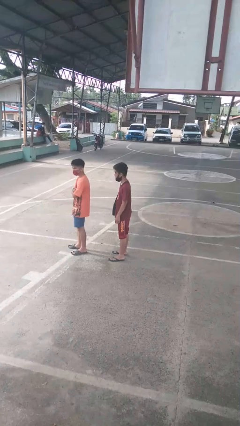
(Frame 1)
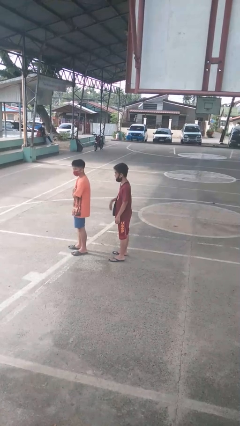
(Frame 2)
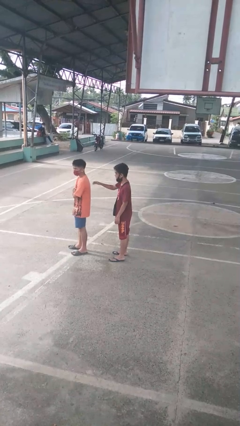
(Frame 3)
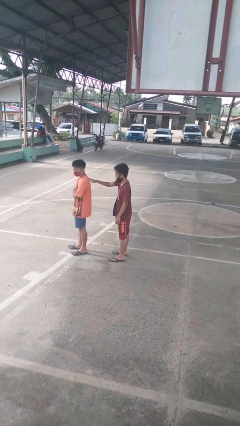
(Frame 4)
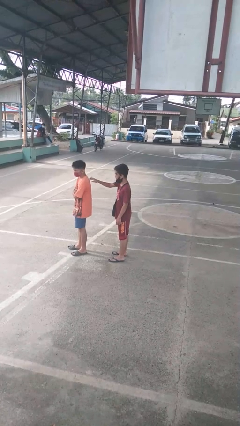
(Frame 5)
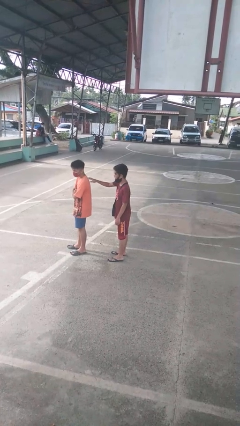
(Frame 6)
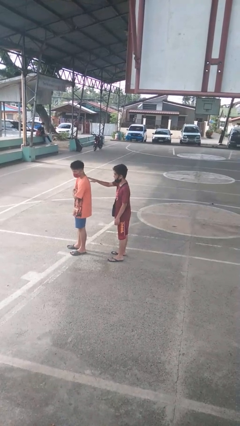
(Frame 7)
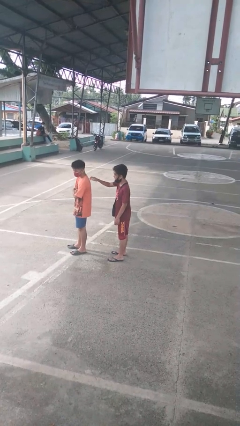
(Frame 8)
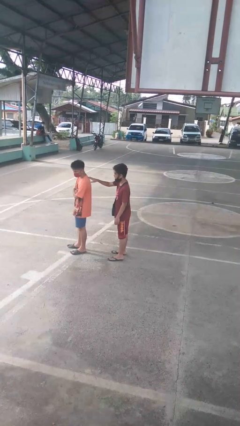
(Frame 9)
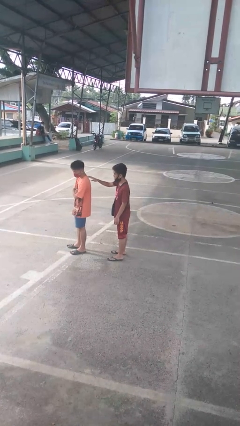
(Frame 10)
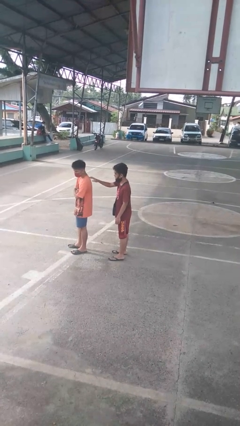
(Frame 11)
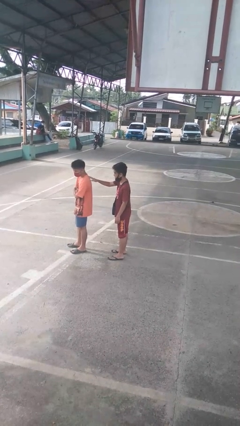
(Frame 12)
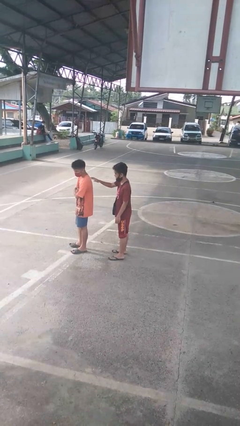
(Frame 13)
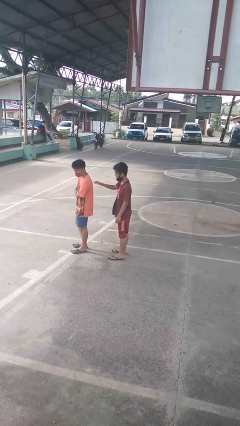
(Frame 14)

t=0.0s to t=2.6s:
person touches back of person

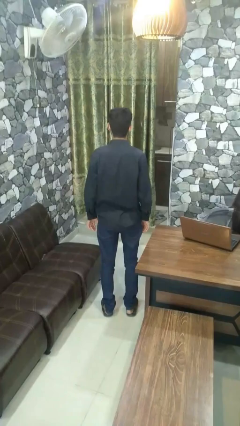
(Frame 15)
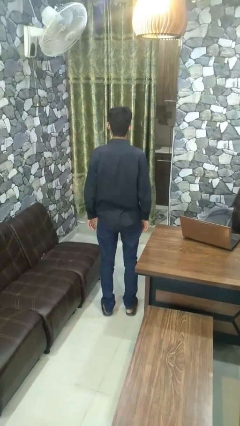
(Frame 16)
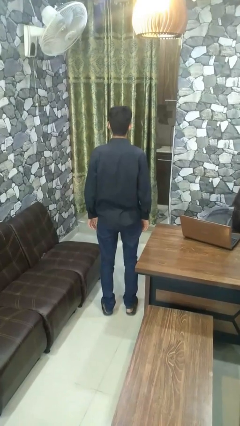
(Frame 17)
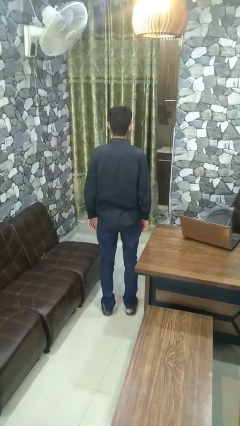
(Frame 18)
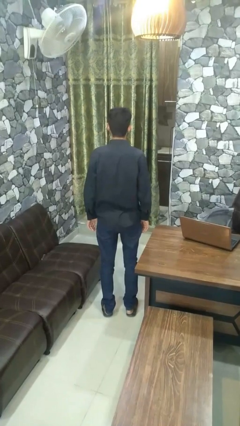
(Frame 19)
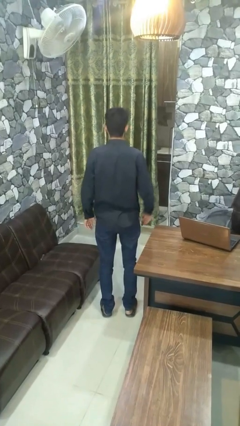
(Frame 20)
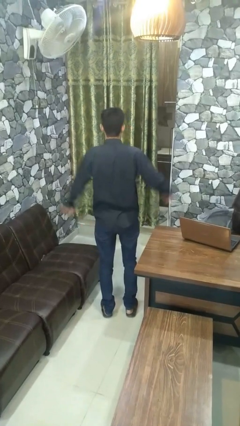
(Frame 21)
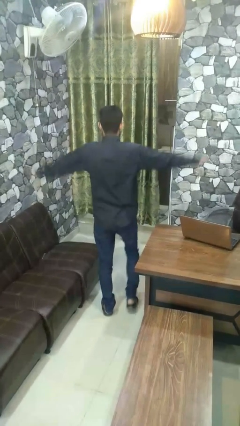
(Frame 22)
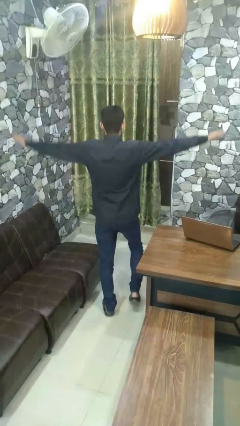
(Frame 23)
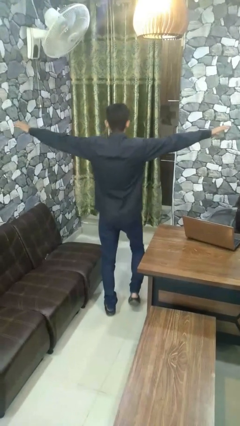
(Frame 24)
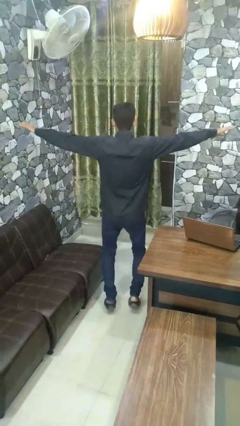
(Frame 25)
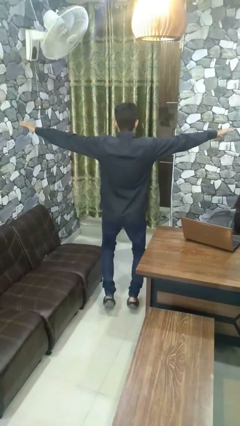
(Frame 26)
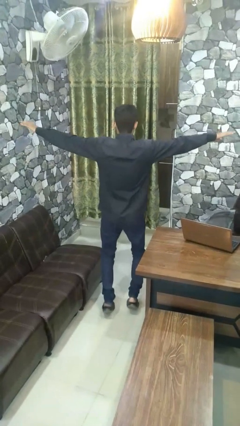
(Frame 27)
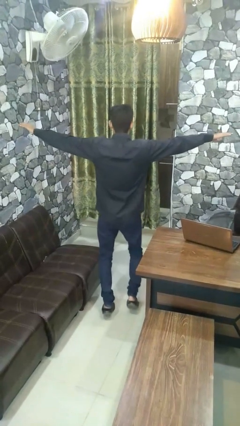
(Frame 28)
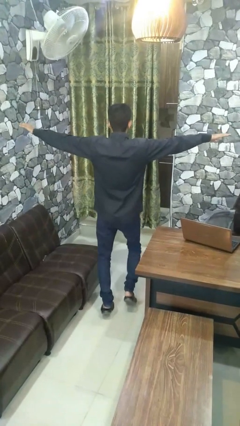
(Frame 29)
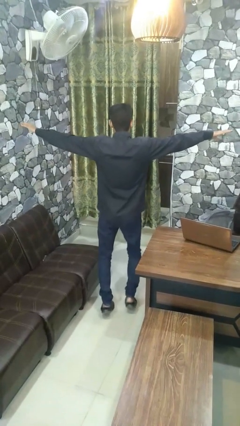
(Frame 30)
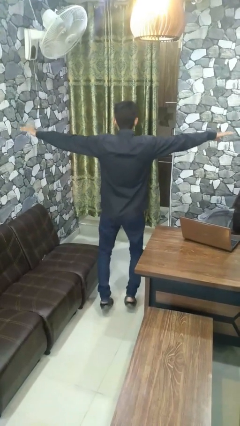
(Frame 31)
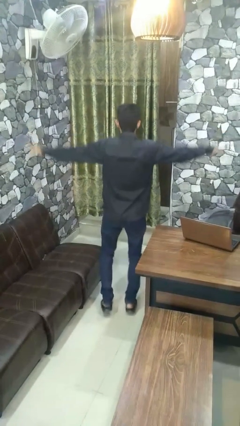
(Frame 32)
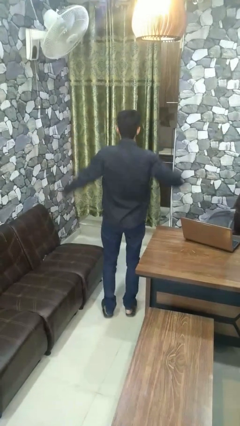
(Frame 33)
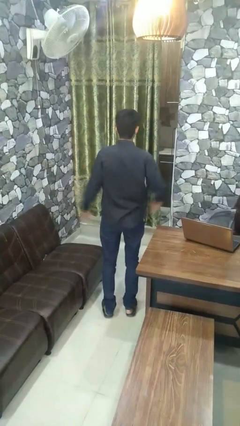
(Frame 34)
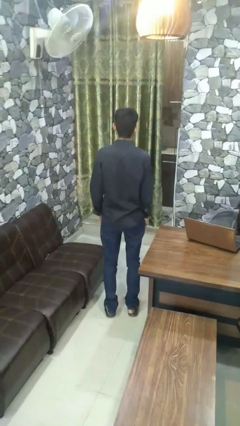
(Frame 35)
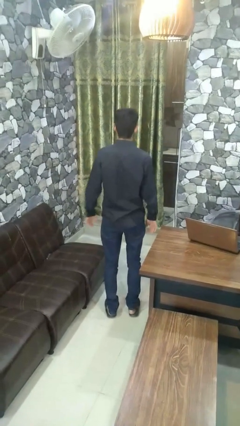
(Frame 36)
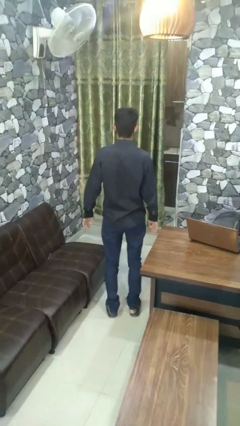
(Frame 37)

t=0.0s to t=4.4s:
person walks tiptoe

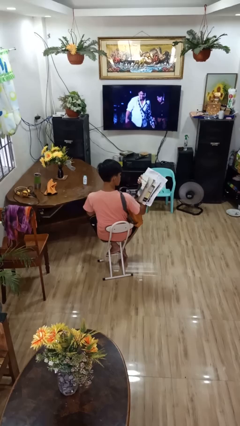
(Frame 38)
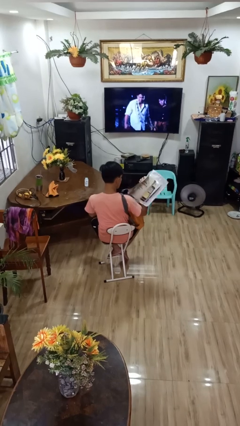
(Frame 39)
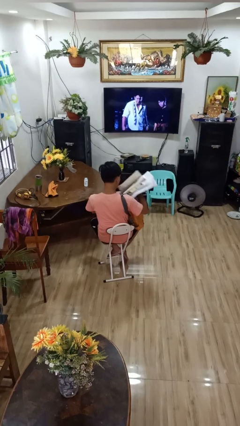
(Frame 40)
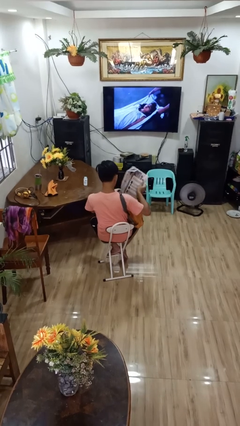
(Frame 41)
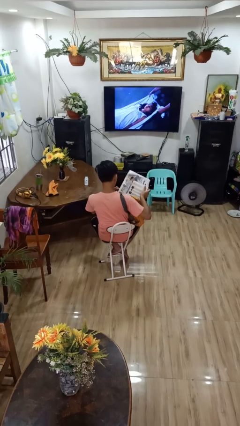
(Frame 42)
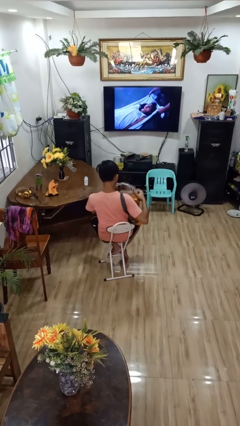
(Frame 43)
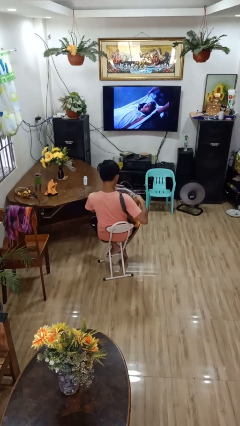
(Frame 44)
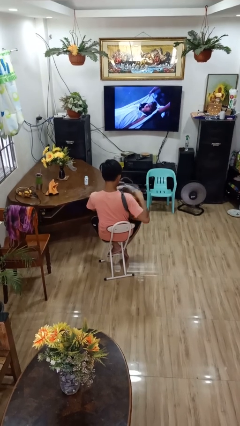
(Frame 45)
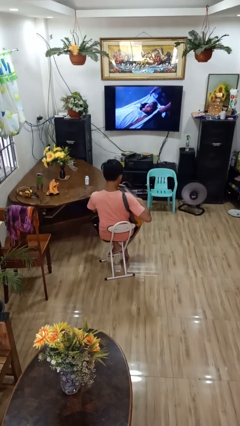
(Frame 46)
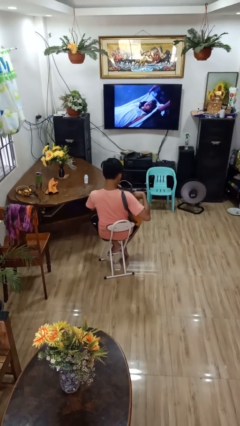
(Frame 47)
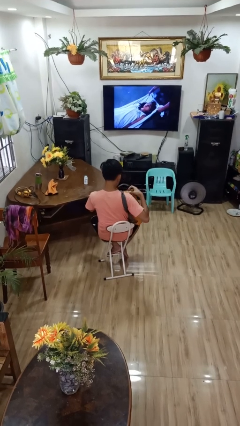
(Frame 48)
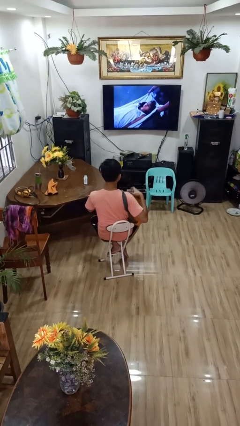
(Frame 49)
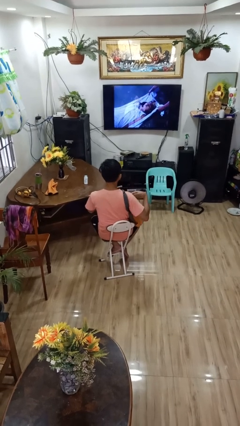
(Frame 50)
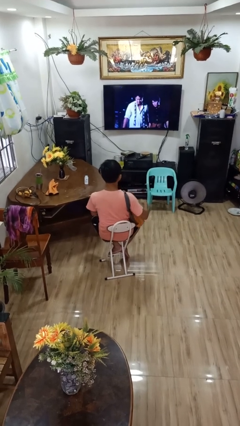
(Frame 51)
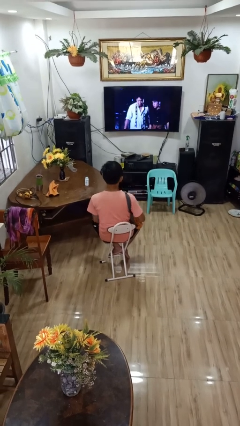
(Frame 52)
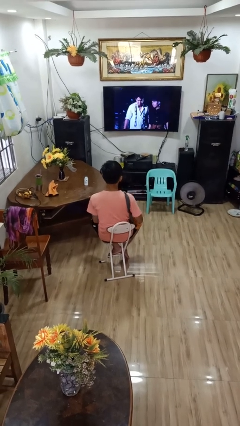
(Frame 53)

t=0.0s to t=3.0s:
person puts object into backpack

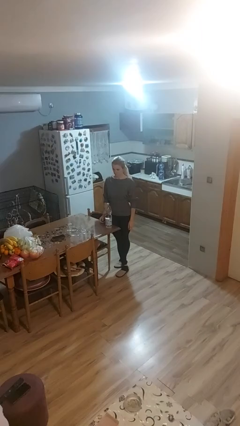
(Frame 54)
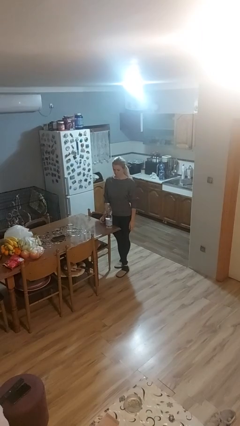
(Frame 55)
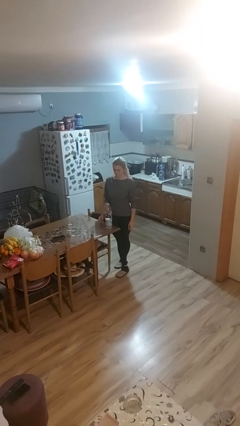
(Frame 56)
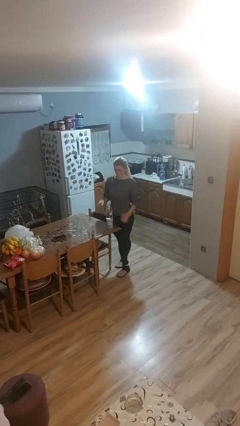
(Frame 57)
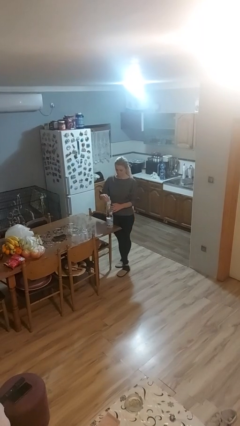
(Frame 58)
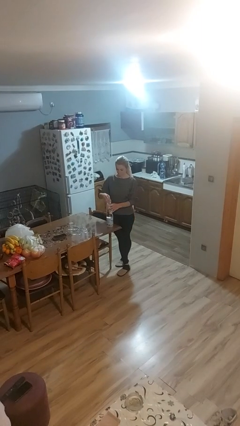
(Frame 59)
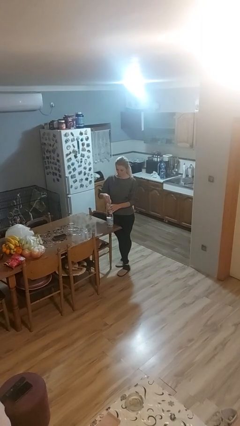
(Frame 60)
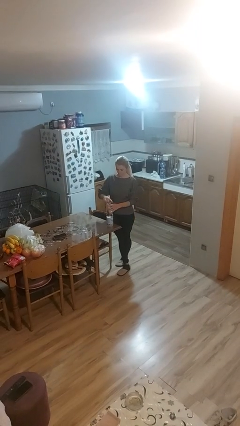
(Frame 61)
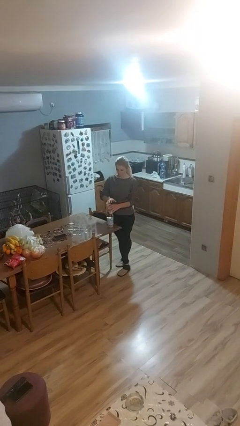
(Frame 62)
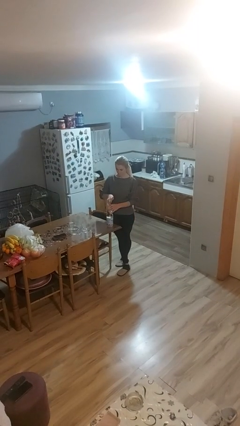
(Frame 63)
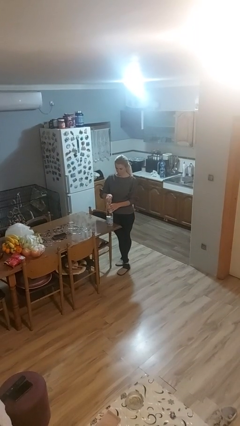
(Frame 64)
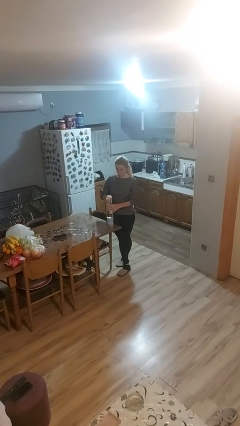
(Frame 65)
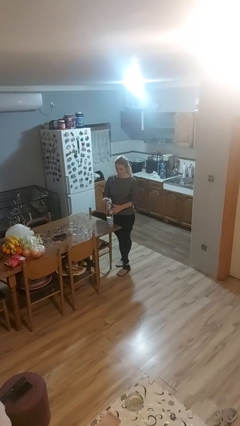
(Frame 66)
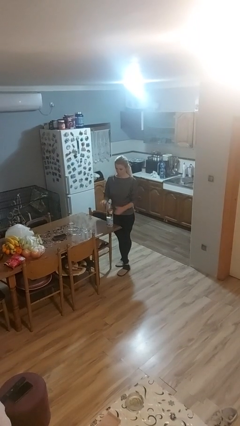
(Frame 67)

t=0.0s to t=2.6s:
person screws lid to bottle

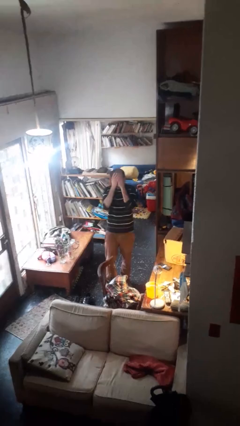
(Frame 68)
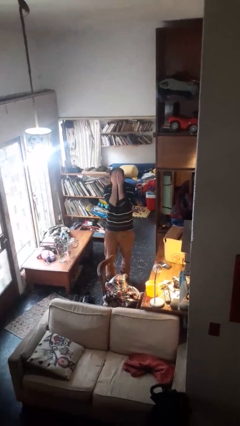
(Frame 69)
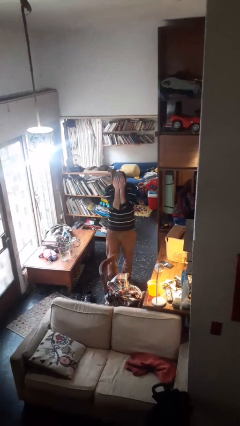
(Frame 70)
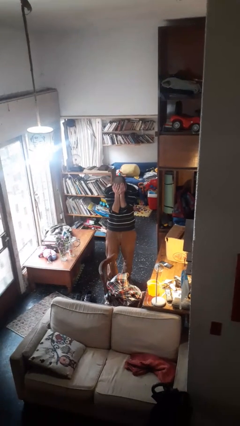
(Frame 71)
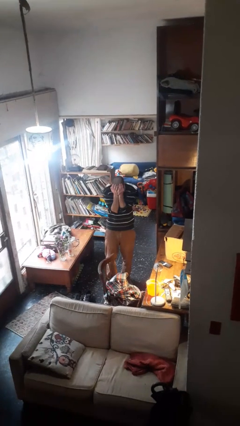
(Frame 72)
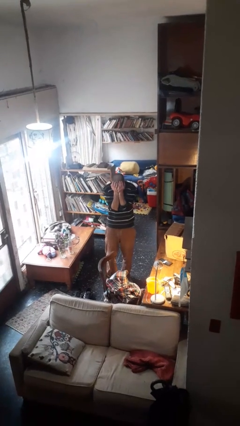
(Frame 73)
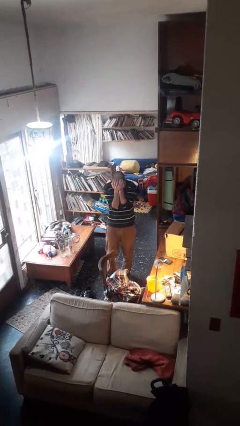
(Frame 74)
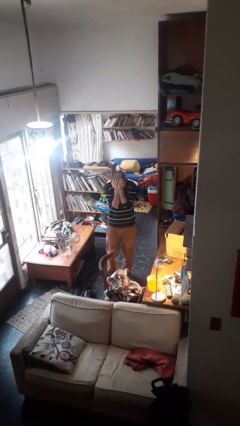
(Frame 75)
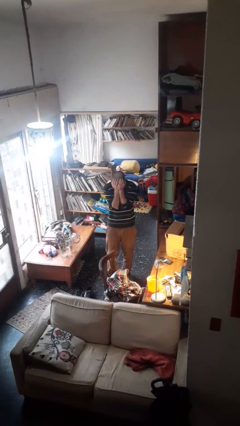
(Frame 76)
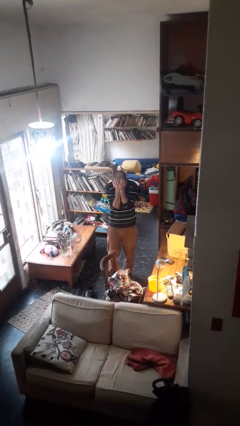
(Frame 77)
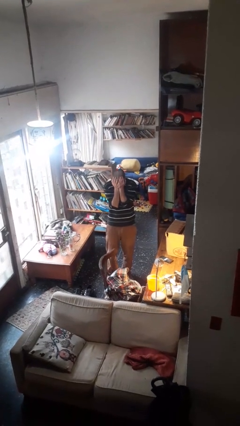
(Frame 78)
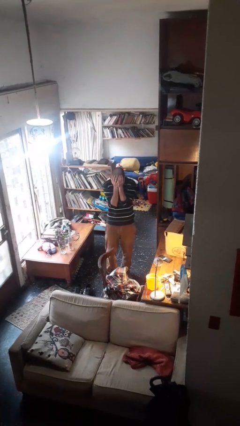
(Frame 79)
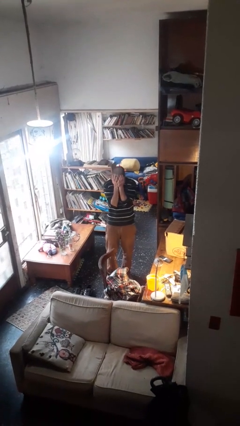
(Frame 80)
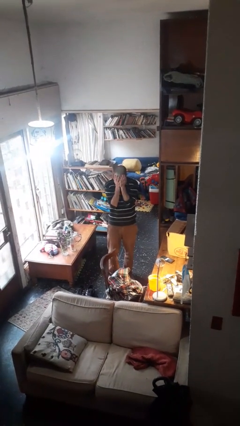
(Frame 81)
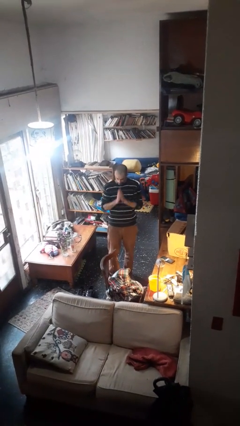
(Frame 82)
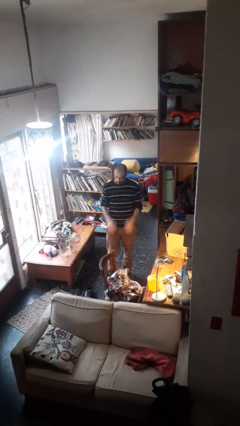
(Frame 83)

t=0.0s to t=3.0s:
person covers face with hands

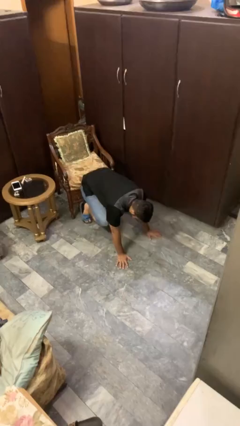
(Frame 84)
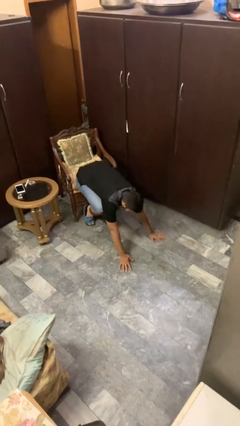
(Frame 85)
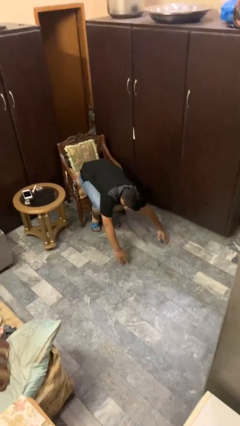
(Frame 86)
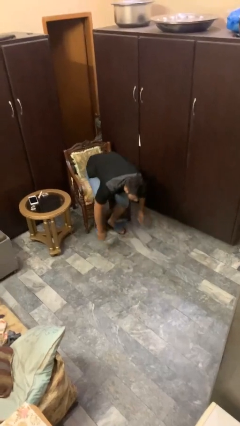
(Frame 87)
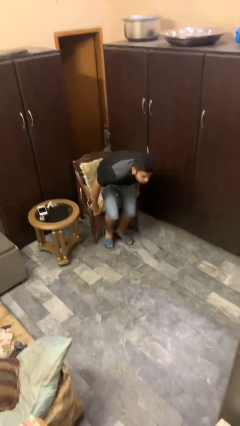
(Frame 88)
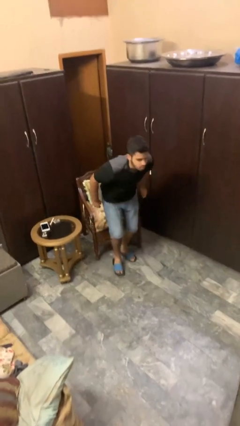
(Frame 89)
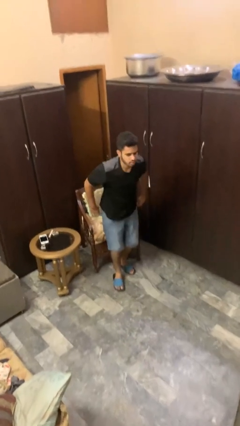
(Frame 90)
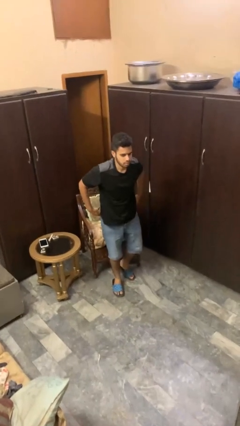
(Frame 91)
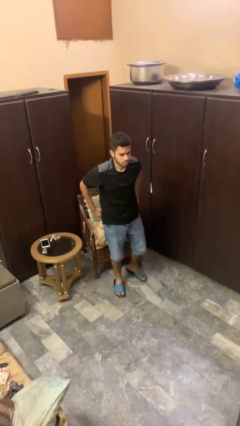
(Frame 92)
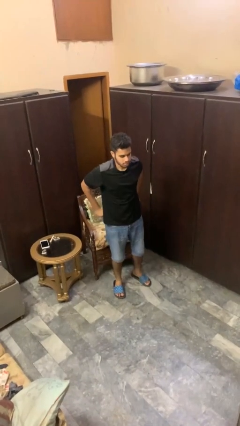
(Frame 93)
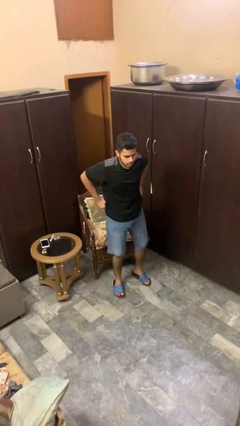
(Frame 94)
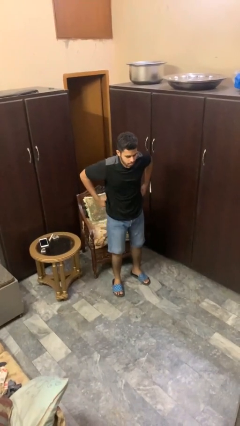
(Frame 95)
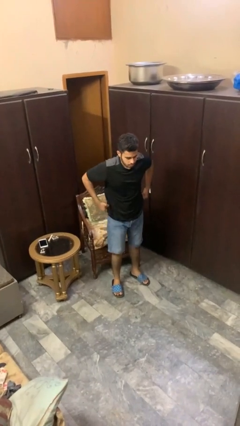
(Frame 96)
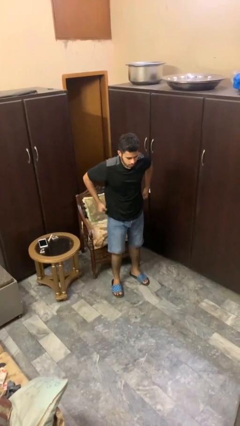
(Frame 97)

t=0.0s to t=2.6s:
person stands up from floor
